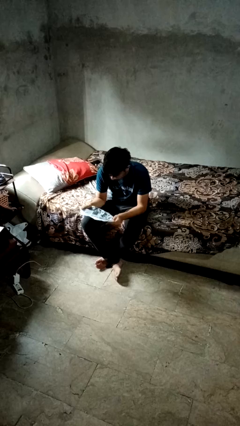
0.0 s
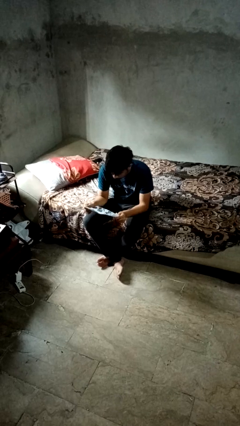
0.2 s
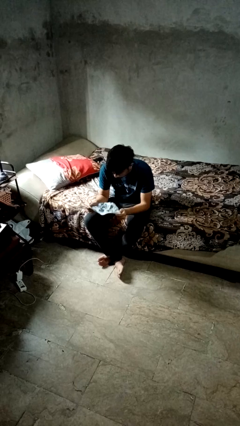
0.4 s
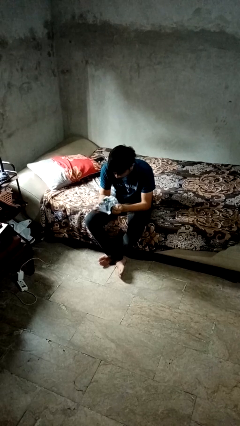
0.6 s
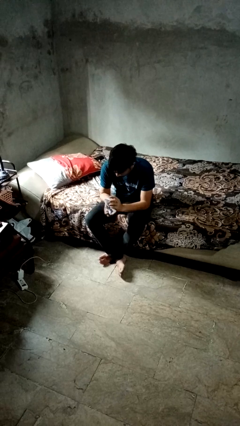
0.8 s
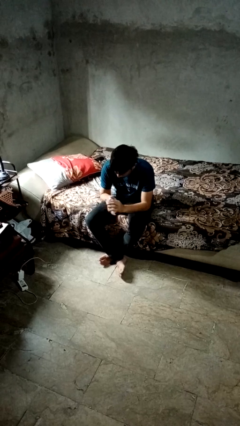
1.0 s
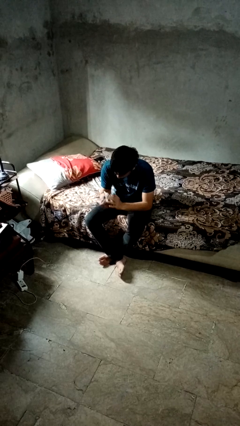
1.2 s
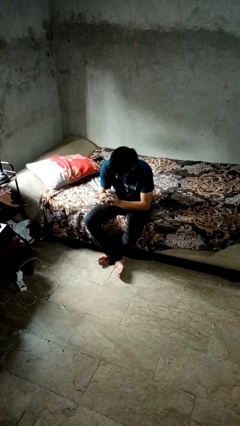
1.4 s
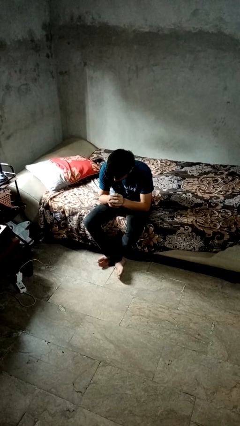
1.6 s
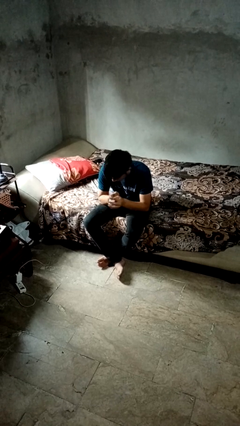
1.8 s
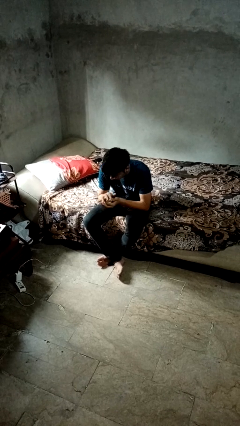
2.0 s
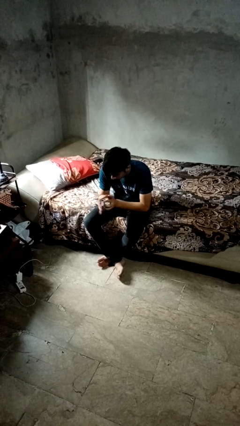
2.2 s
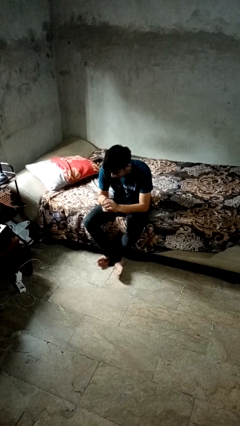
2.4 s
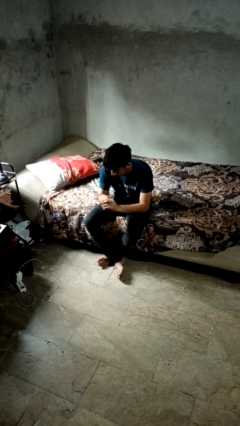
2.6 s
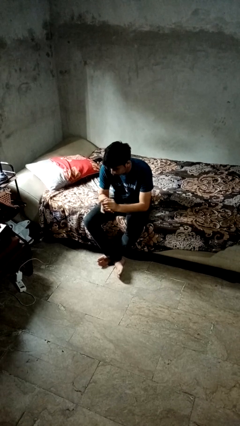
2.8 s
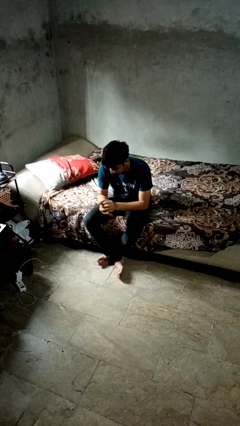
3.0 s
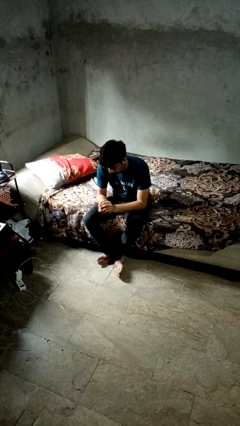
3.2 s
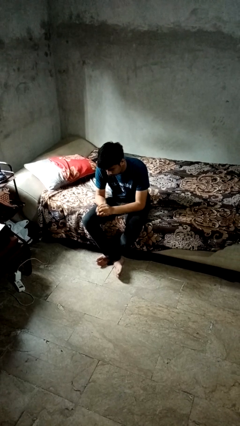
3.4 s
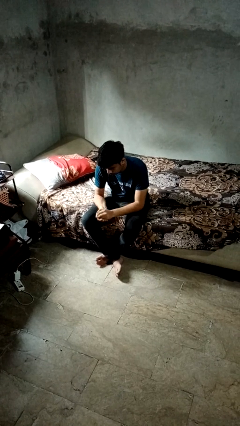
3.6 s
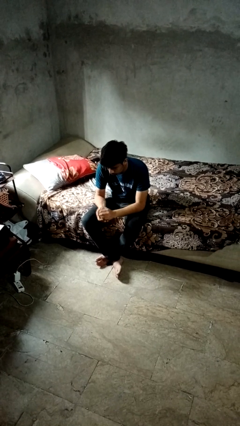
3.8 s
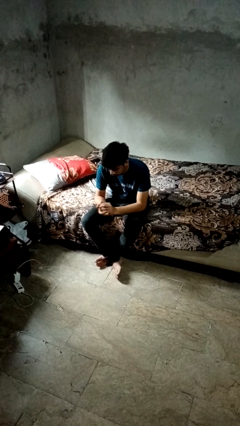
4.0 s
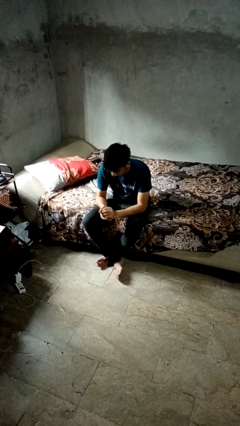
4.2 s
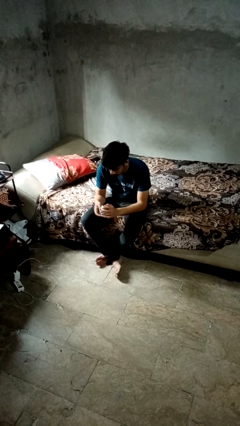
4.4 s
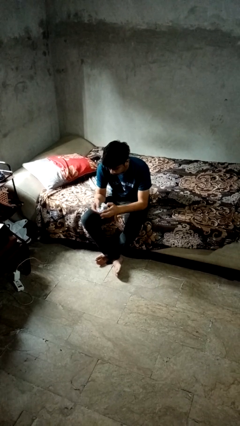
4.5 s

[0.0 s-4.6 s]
person crumples paper

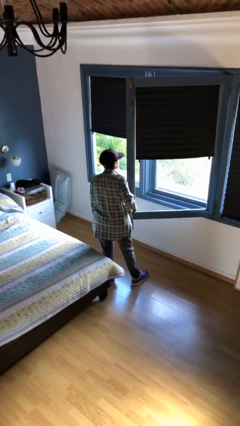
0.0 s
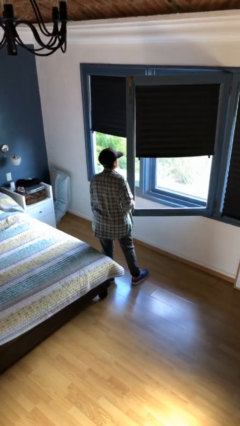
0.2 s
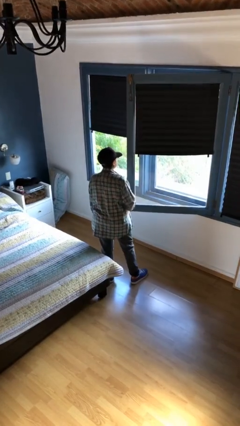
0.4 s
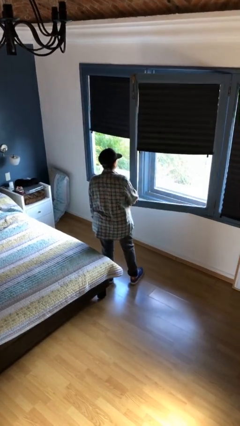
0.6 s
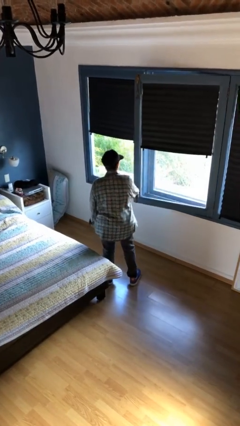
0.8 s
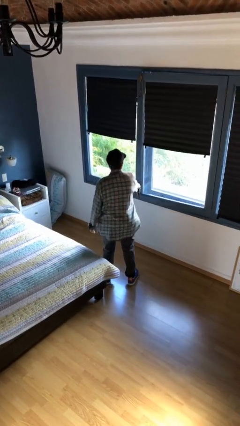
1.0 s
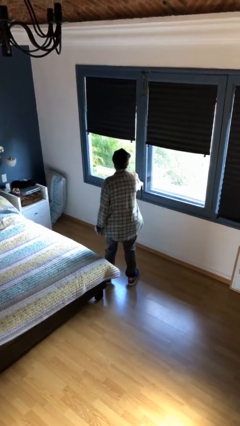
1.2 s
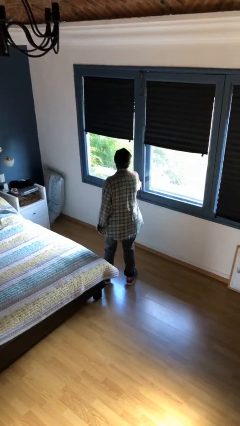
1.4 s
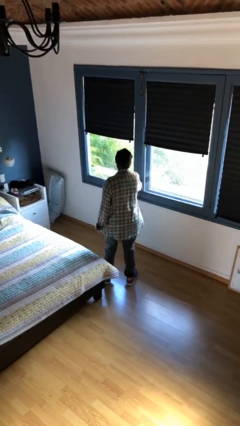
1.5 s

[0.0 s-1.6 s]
person closes home window

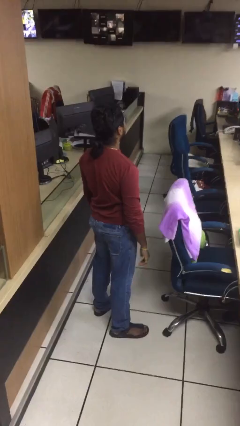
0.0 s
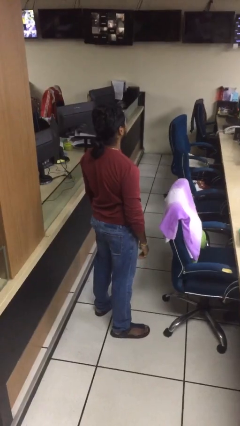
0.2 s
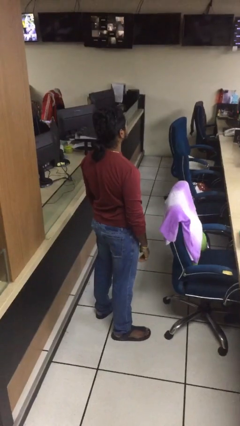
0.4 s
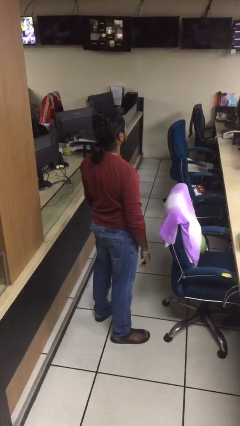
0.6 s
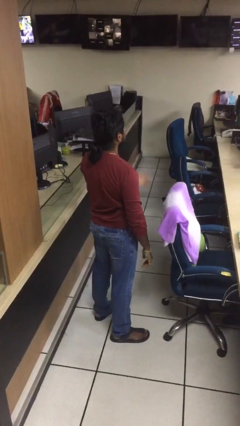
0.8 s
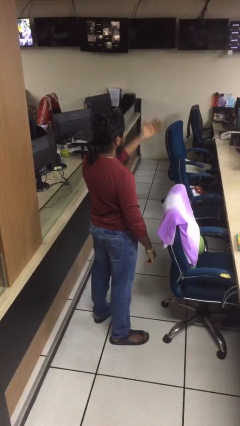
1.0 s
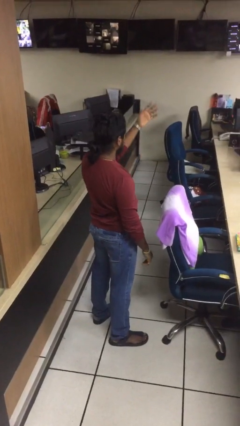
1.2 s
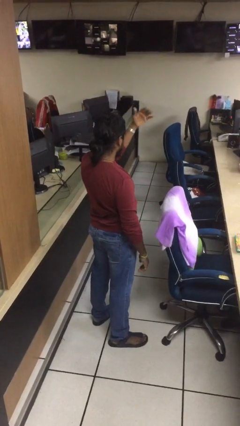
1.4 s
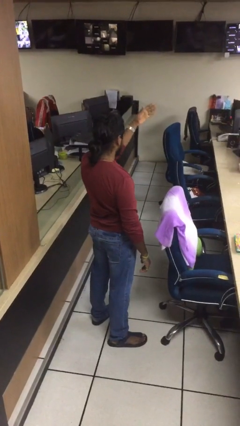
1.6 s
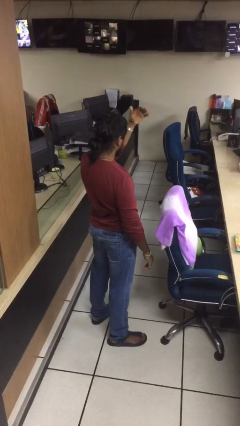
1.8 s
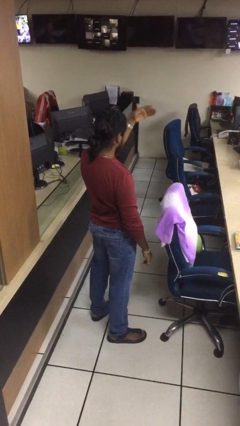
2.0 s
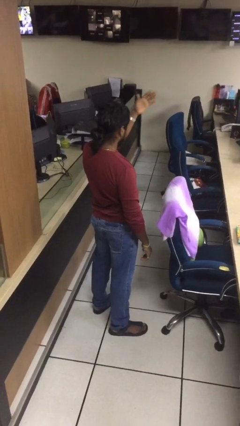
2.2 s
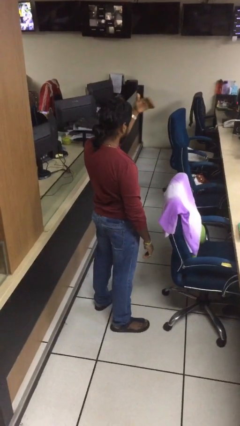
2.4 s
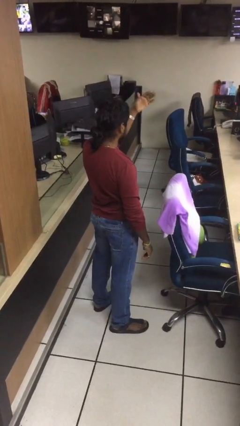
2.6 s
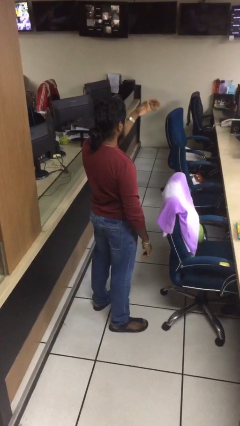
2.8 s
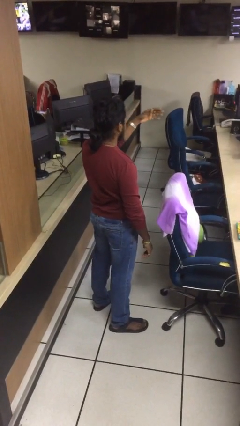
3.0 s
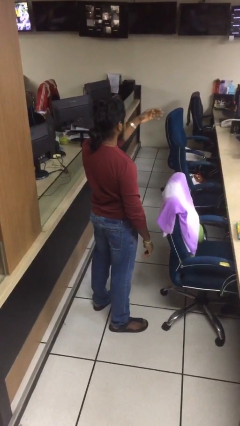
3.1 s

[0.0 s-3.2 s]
person gestures come here

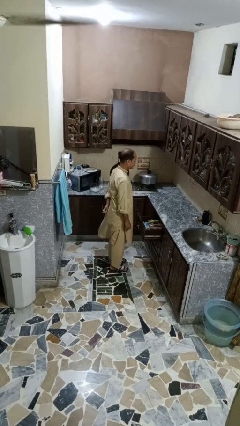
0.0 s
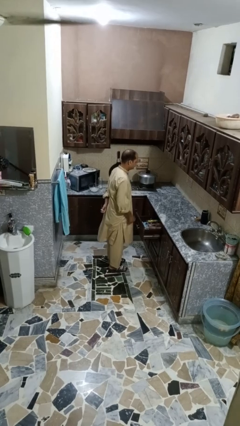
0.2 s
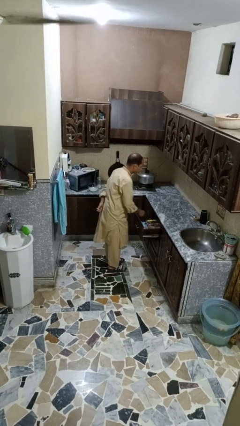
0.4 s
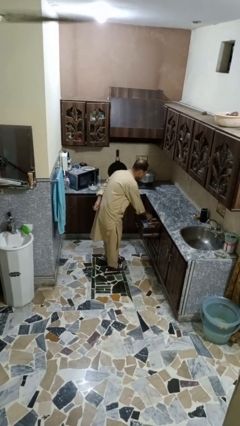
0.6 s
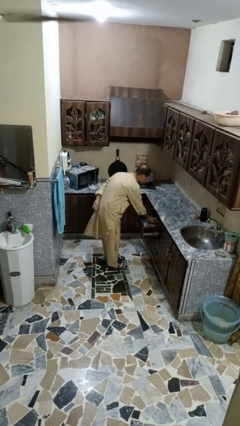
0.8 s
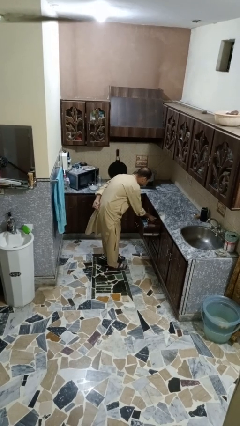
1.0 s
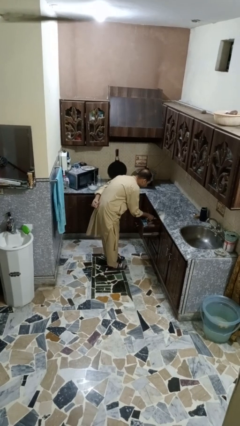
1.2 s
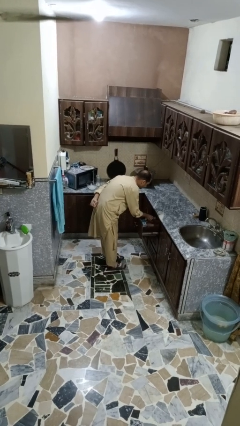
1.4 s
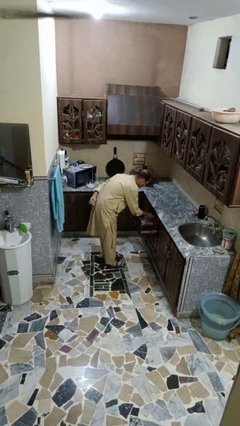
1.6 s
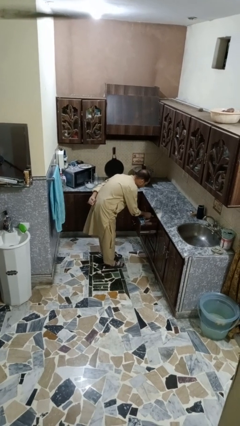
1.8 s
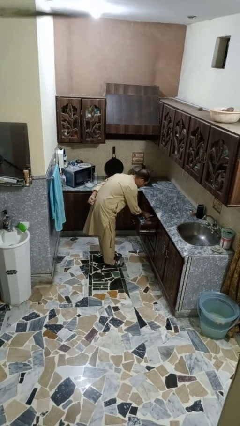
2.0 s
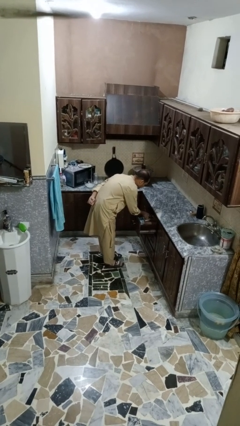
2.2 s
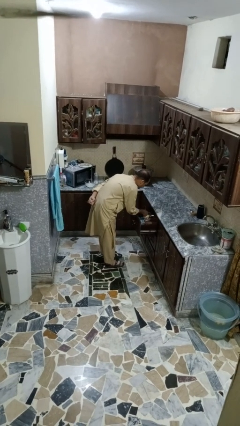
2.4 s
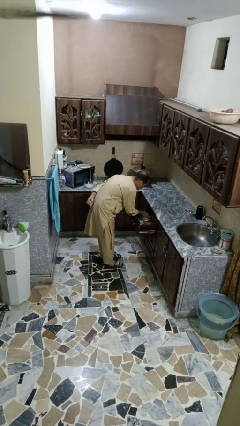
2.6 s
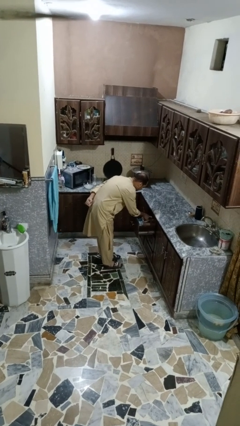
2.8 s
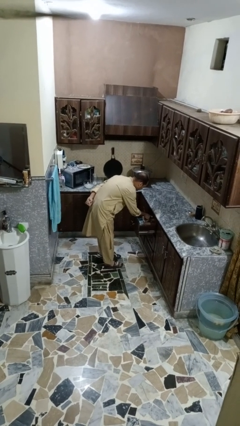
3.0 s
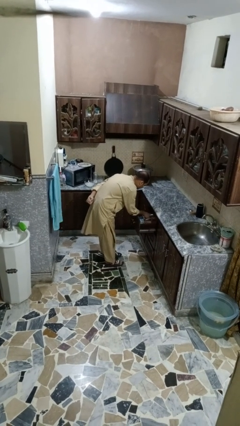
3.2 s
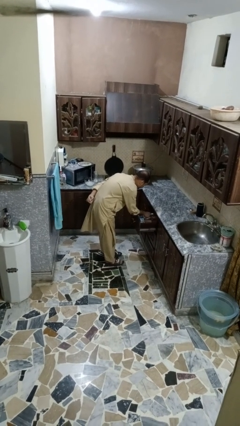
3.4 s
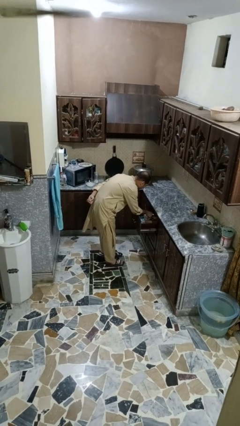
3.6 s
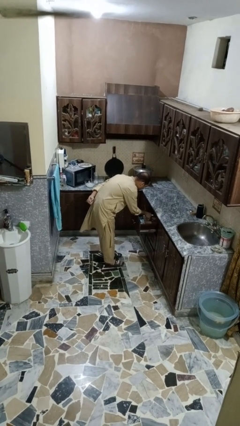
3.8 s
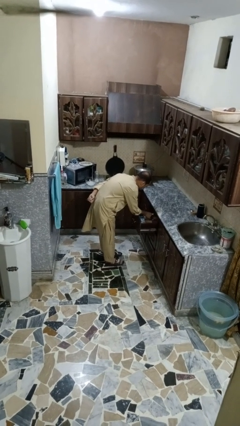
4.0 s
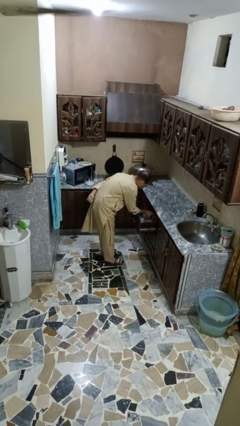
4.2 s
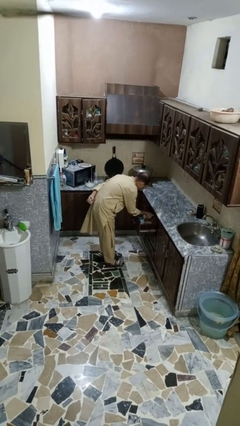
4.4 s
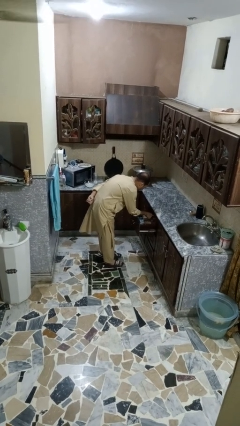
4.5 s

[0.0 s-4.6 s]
person searches in kitchen drawer

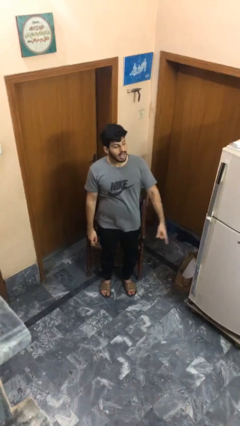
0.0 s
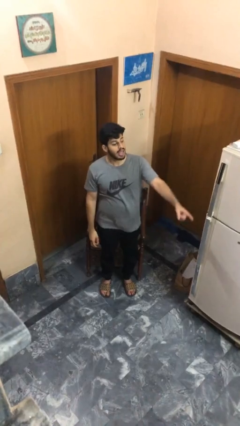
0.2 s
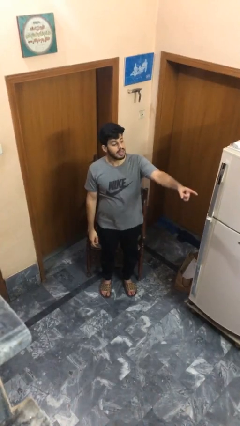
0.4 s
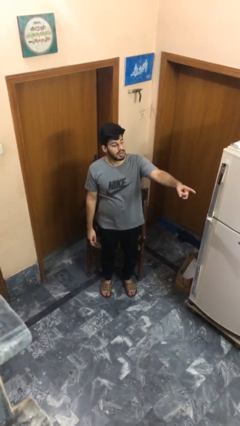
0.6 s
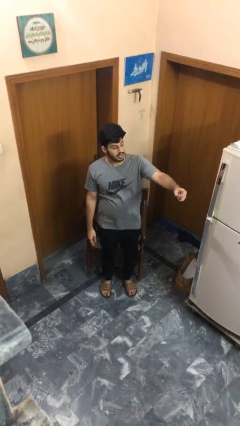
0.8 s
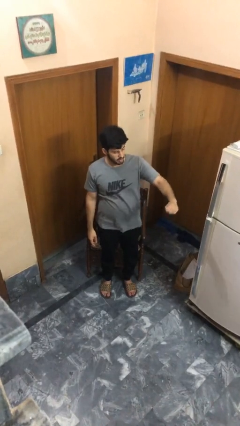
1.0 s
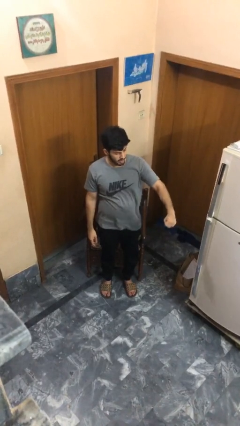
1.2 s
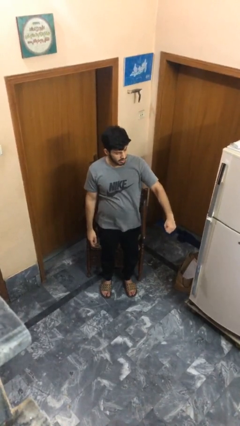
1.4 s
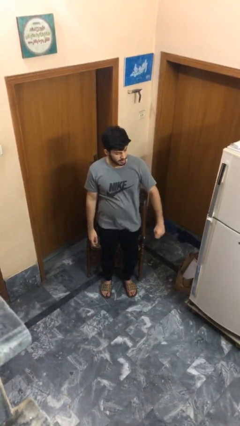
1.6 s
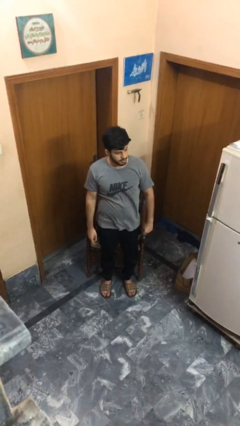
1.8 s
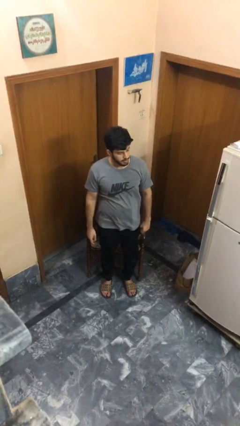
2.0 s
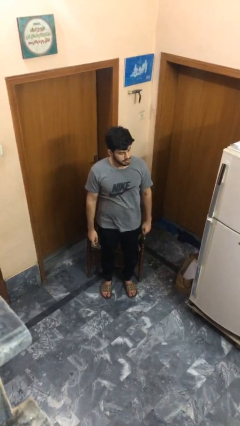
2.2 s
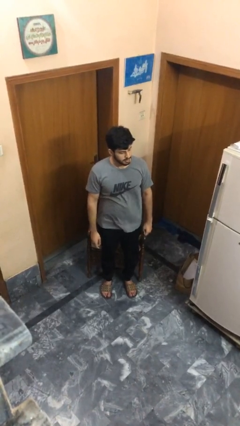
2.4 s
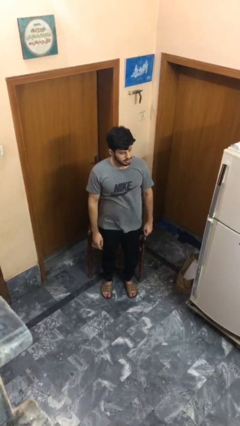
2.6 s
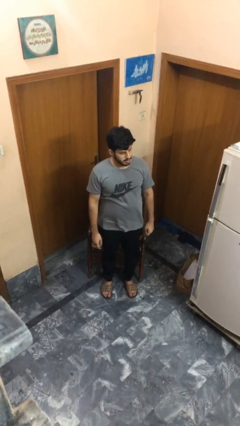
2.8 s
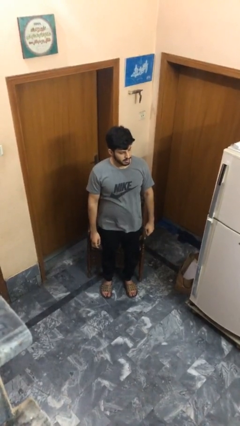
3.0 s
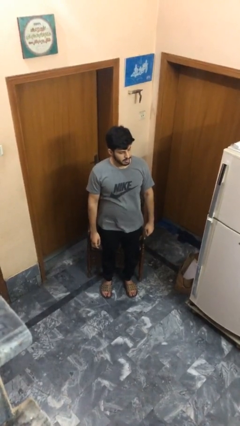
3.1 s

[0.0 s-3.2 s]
person points at person

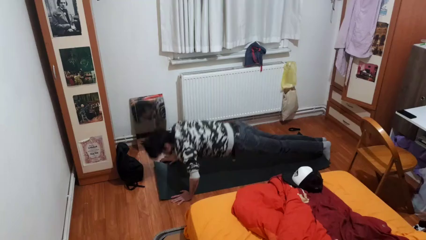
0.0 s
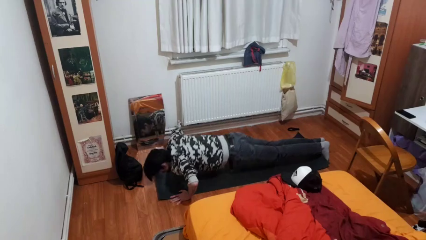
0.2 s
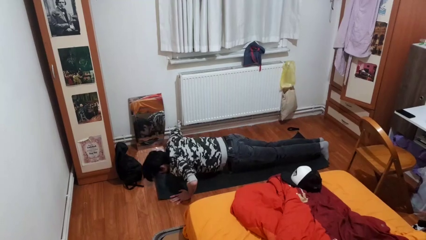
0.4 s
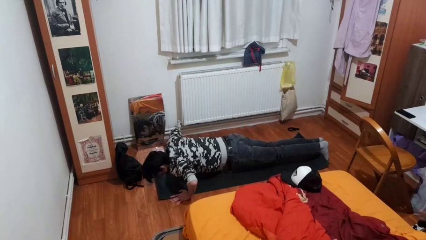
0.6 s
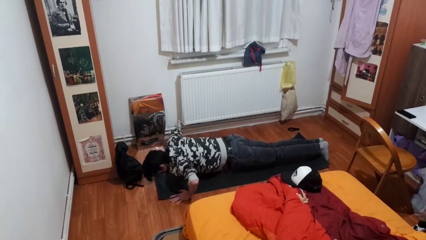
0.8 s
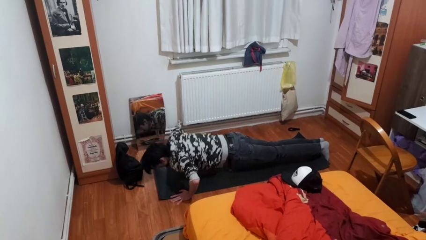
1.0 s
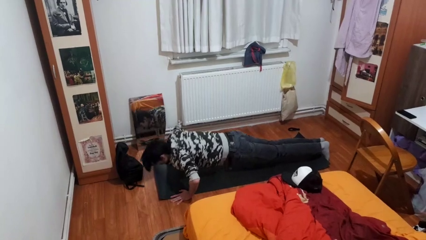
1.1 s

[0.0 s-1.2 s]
person exercises with pushup
